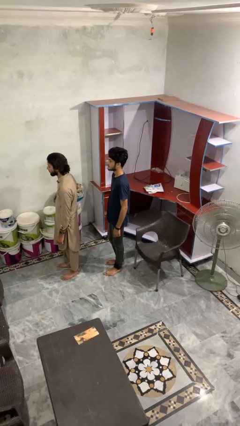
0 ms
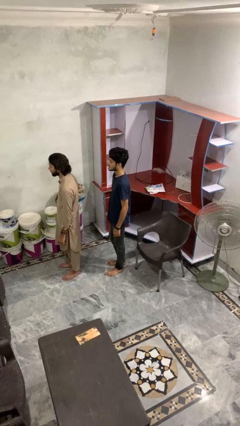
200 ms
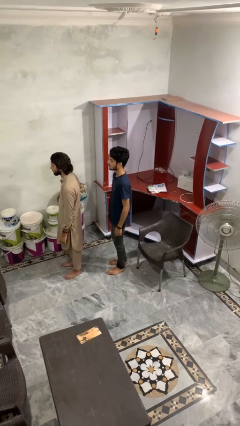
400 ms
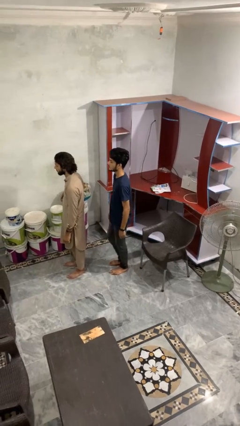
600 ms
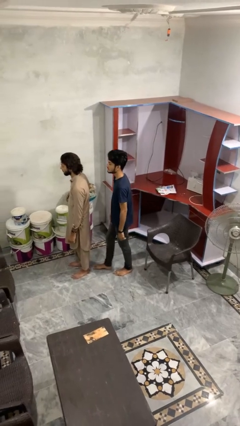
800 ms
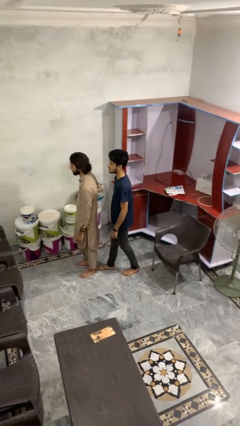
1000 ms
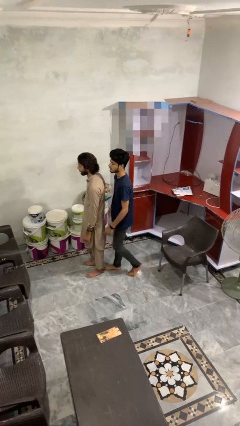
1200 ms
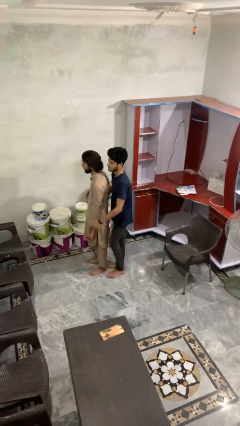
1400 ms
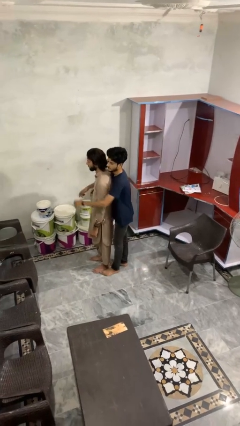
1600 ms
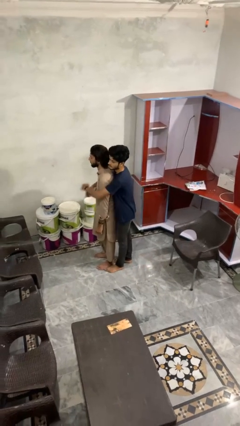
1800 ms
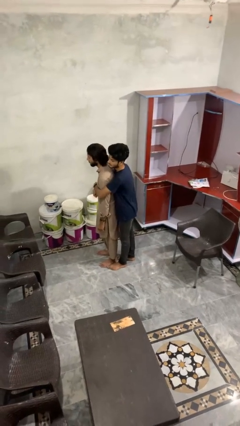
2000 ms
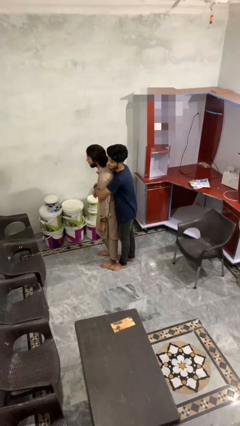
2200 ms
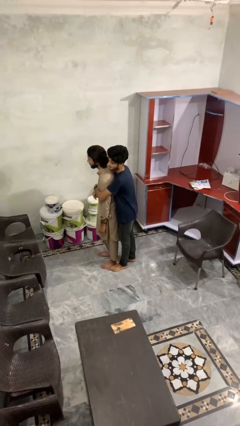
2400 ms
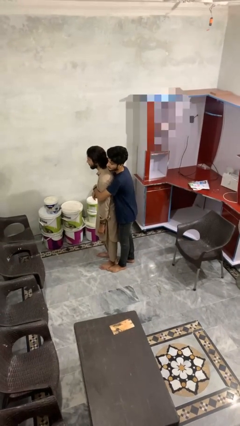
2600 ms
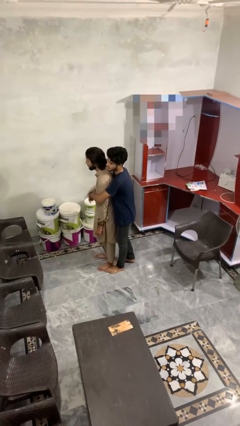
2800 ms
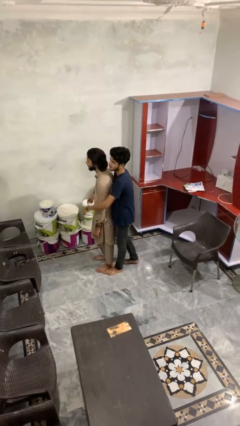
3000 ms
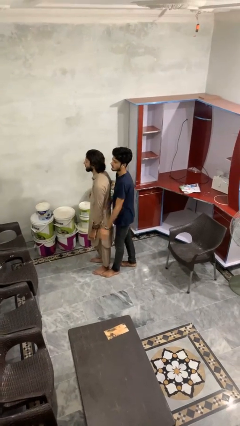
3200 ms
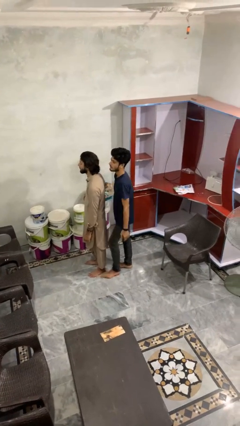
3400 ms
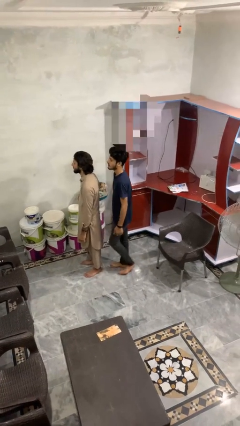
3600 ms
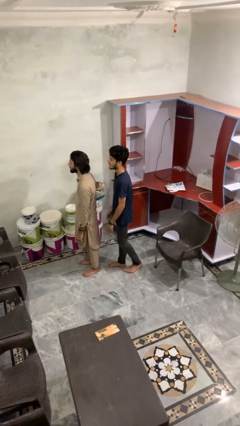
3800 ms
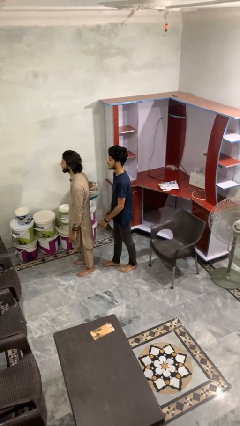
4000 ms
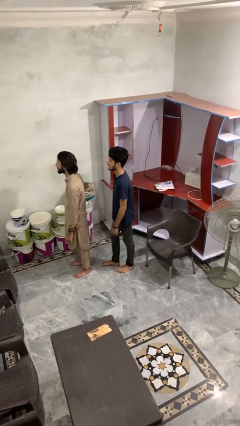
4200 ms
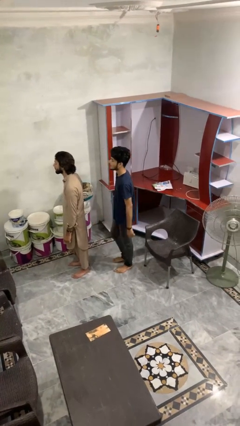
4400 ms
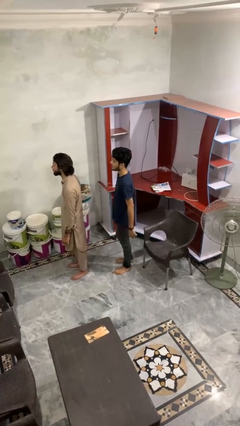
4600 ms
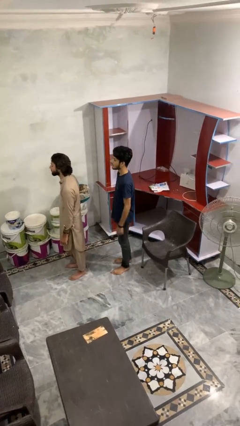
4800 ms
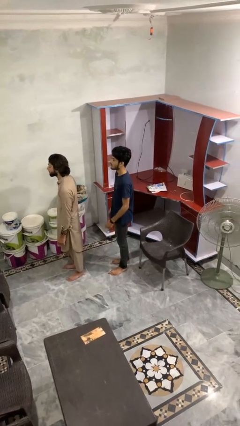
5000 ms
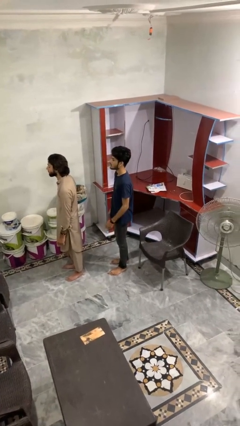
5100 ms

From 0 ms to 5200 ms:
person hugs person from behind

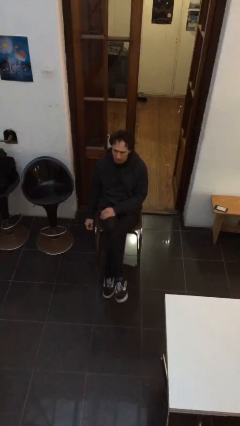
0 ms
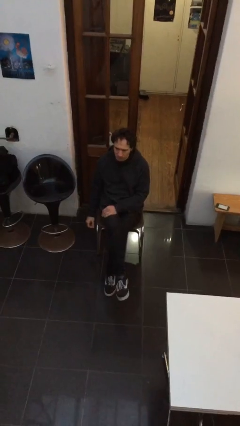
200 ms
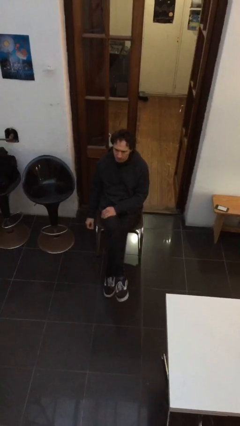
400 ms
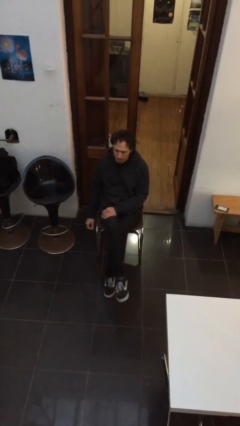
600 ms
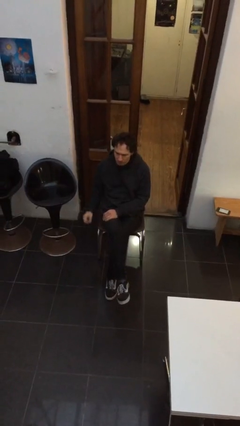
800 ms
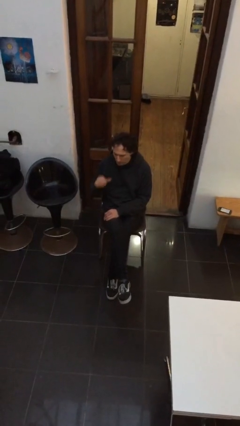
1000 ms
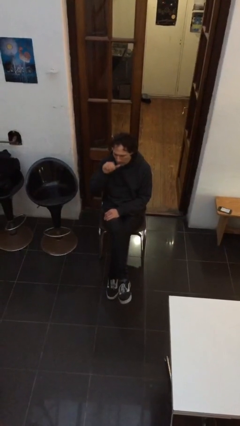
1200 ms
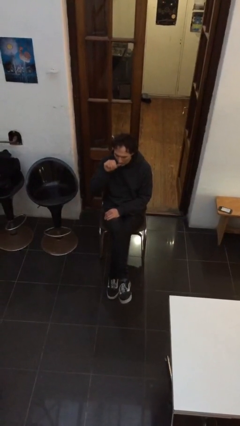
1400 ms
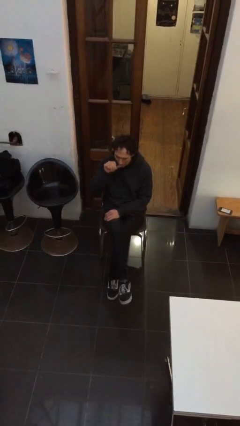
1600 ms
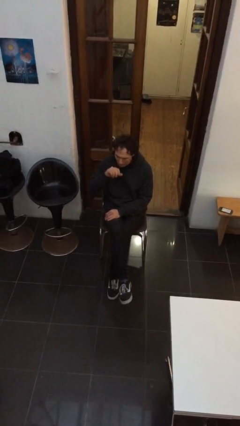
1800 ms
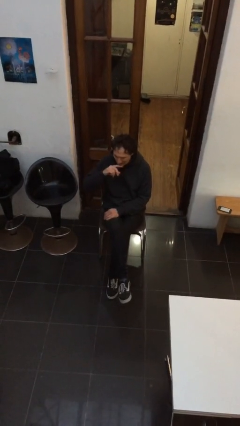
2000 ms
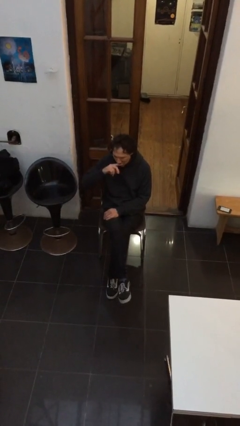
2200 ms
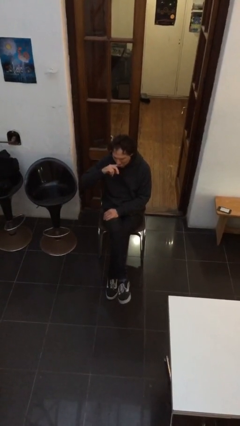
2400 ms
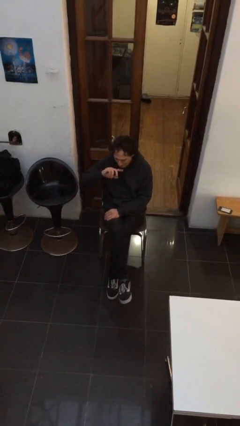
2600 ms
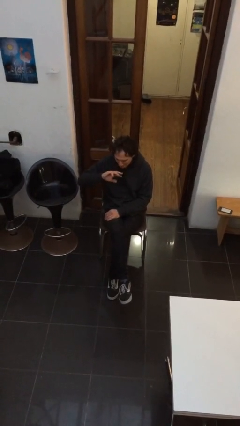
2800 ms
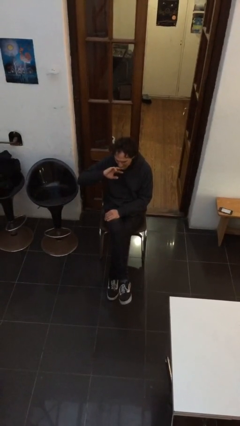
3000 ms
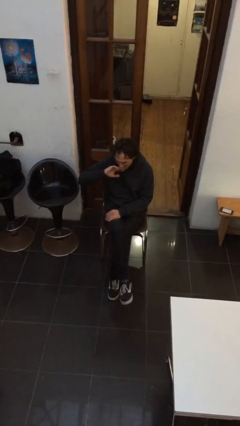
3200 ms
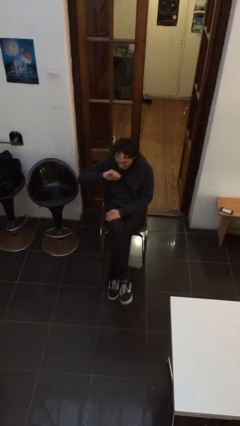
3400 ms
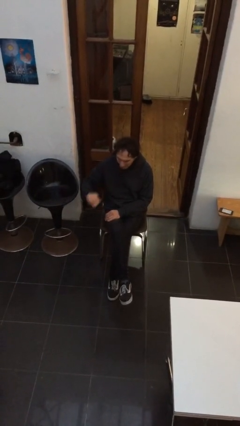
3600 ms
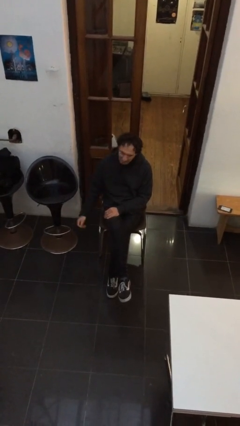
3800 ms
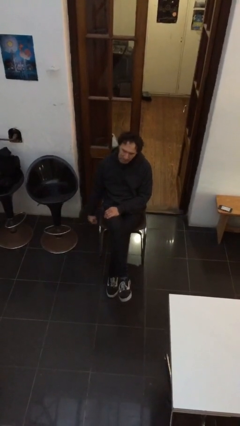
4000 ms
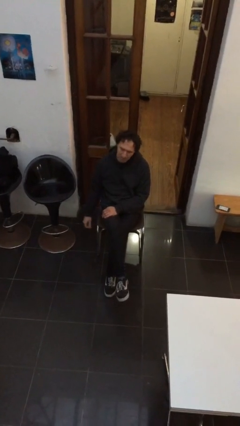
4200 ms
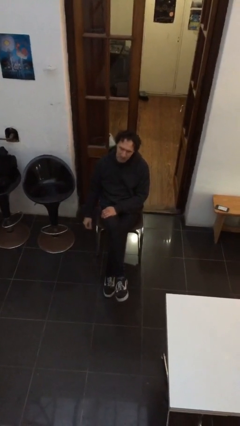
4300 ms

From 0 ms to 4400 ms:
person licks fingers

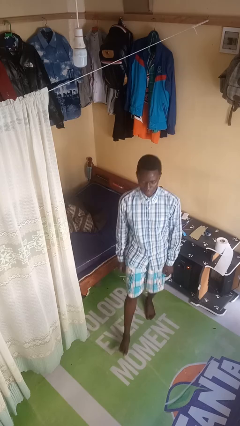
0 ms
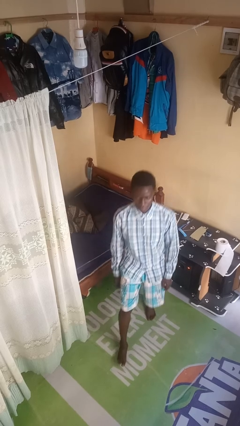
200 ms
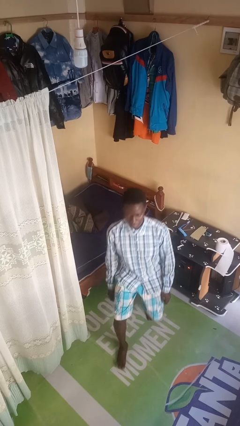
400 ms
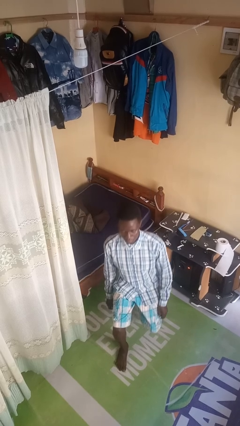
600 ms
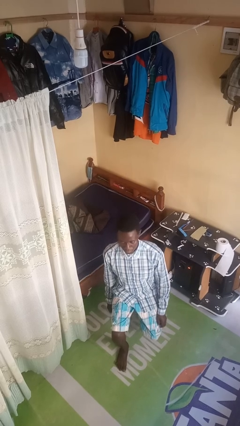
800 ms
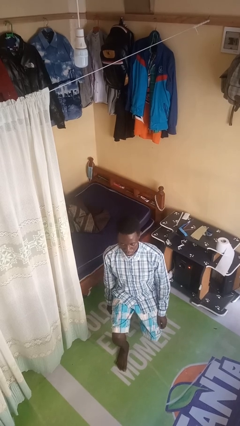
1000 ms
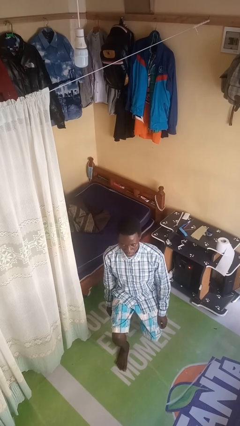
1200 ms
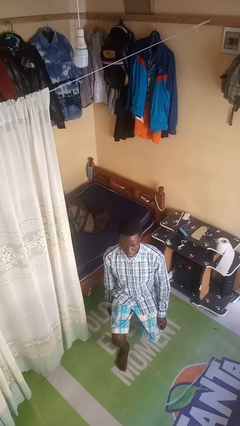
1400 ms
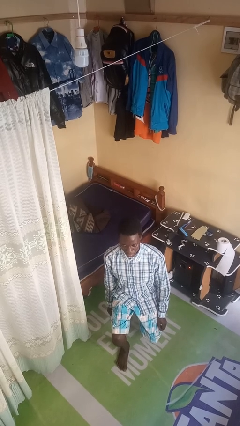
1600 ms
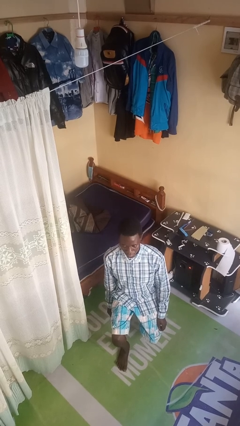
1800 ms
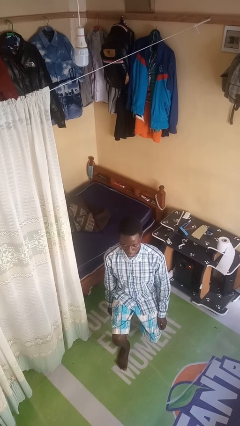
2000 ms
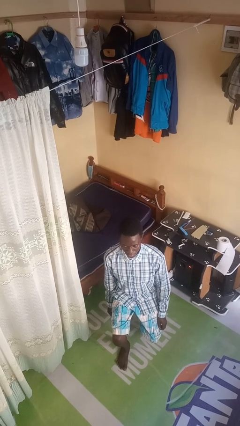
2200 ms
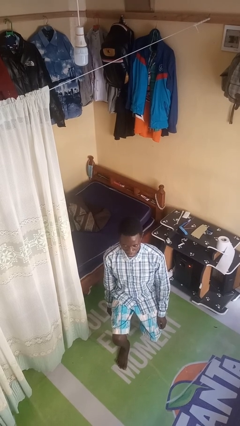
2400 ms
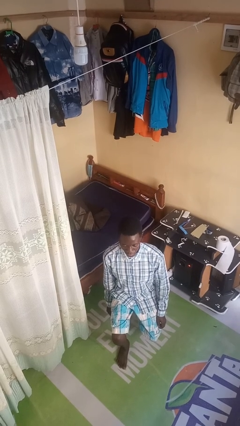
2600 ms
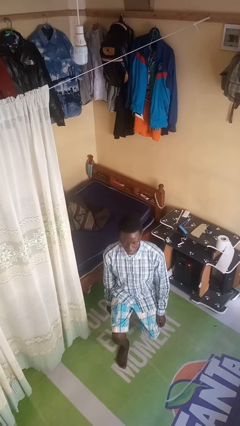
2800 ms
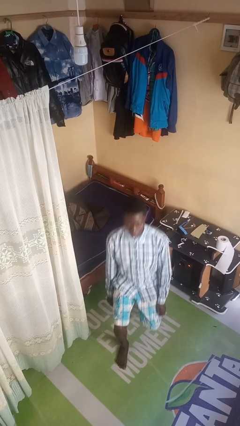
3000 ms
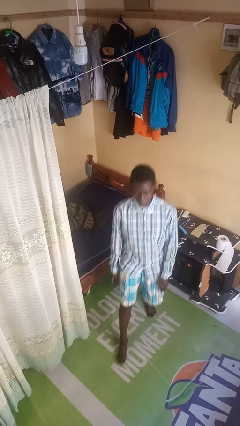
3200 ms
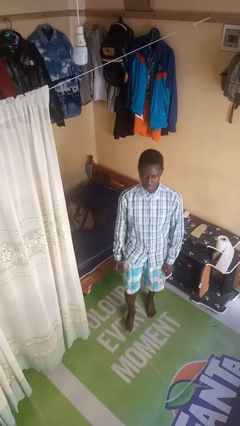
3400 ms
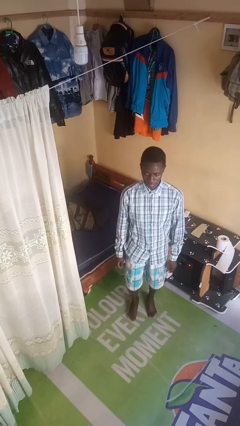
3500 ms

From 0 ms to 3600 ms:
person exercises with lunges

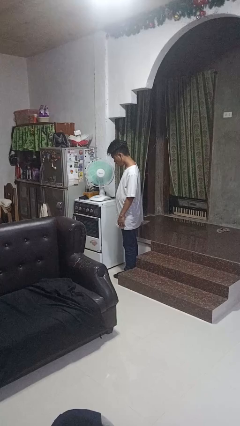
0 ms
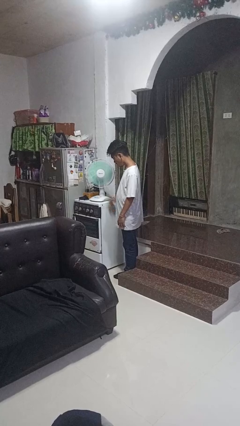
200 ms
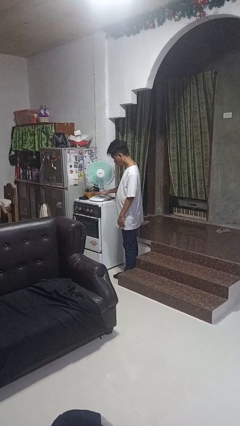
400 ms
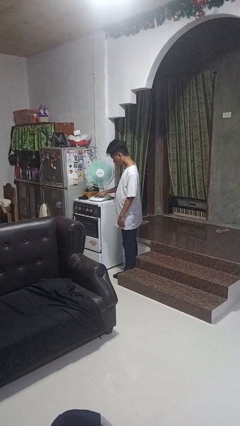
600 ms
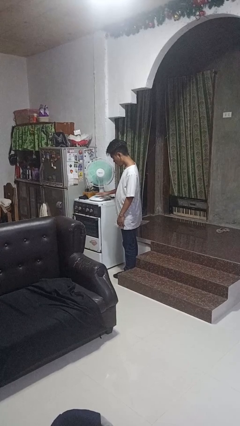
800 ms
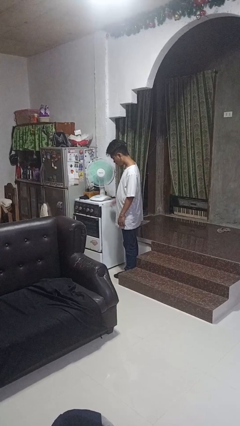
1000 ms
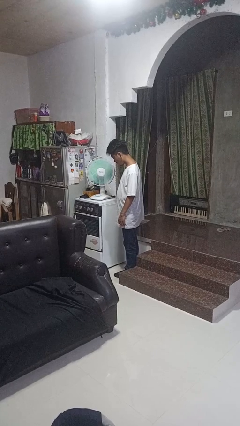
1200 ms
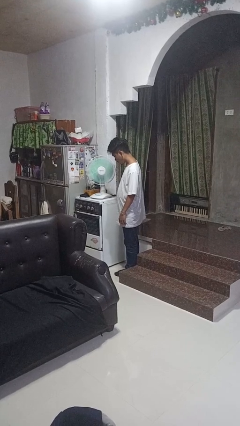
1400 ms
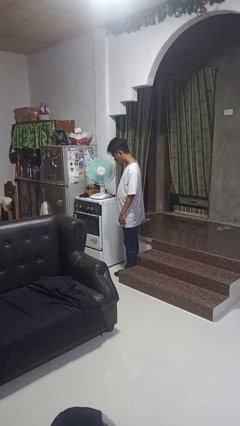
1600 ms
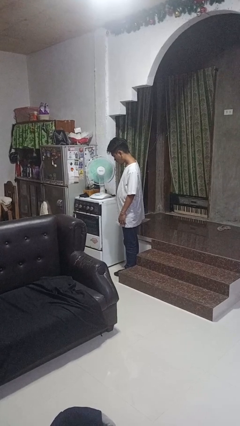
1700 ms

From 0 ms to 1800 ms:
person turns off fan

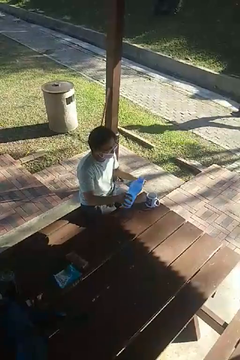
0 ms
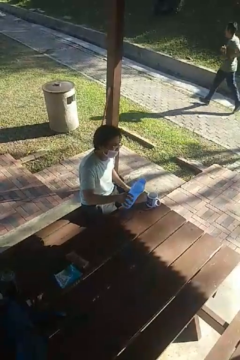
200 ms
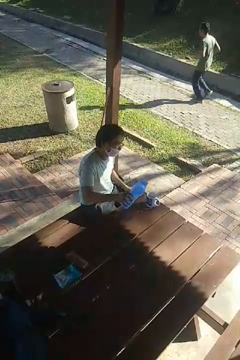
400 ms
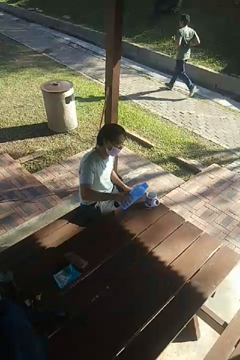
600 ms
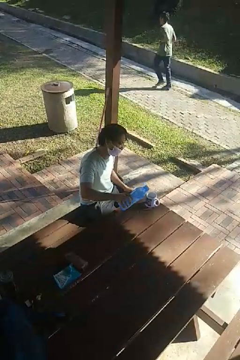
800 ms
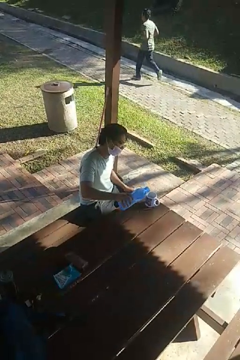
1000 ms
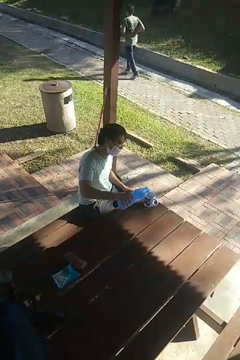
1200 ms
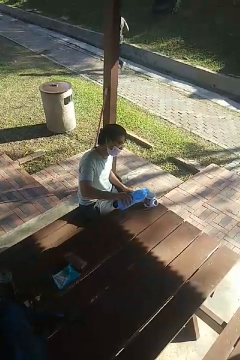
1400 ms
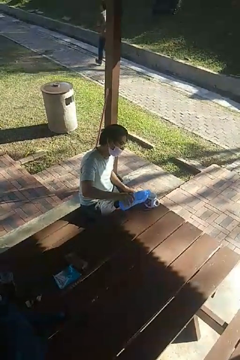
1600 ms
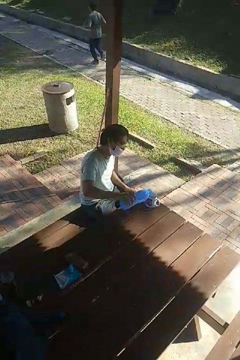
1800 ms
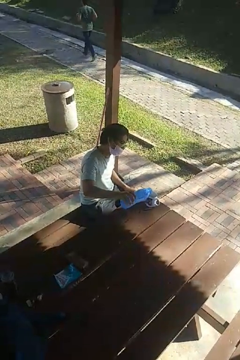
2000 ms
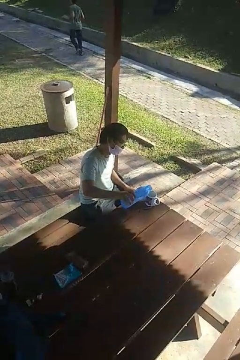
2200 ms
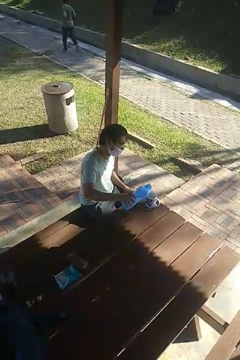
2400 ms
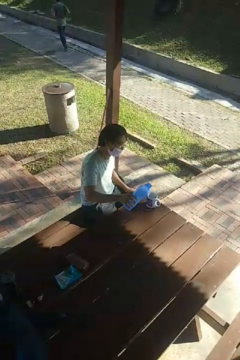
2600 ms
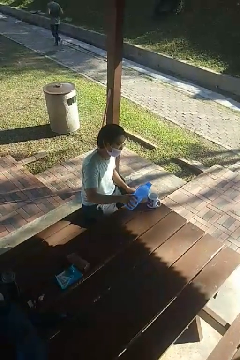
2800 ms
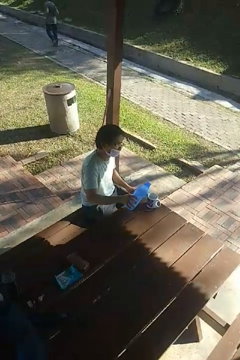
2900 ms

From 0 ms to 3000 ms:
person pours liquid into cup

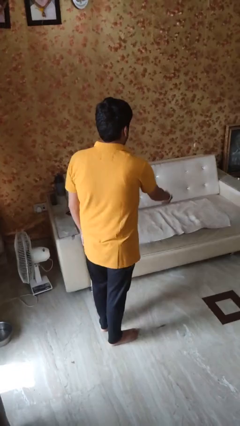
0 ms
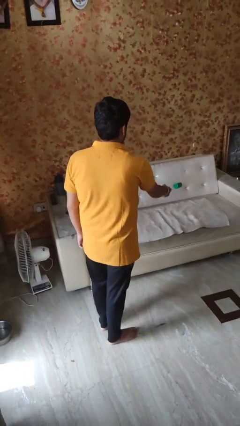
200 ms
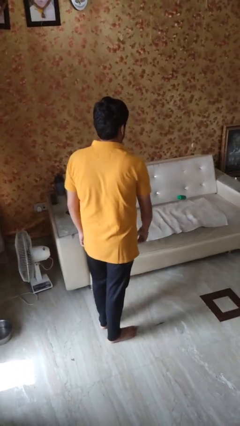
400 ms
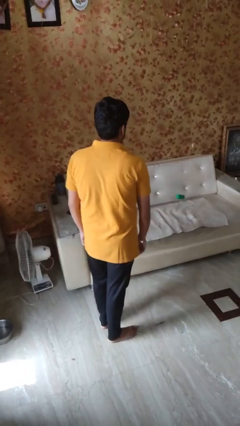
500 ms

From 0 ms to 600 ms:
person throws object on bed
